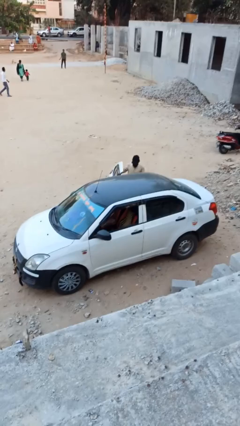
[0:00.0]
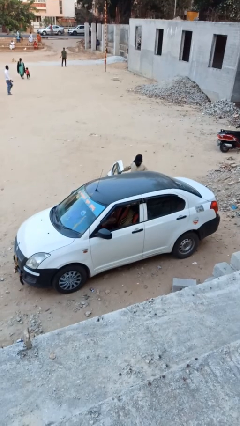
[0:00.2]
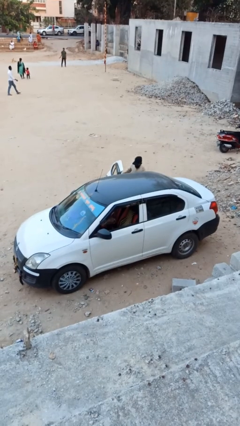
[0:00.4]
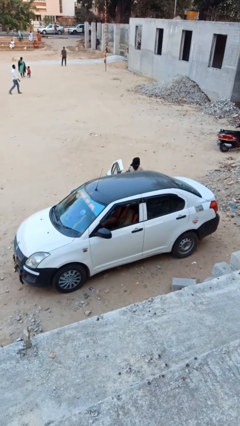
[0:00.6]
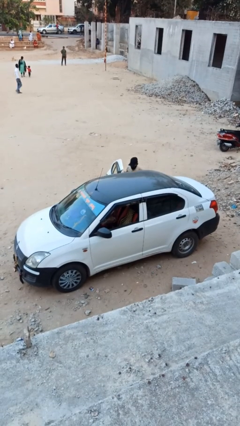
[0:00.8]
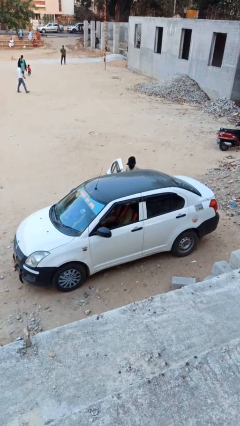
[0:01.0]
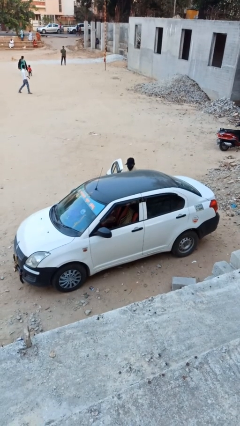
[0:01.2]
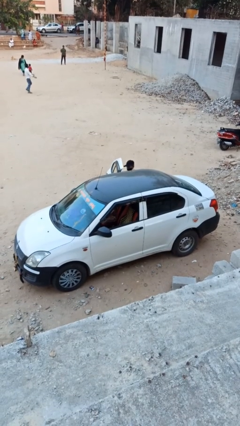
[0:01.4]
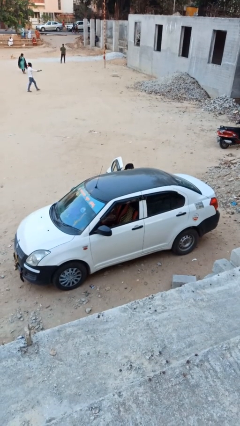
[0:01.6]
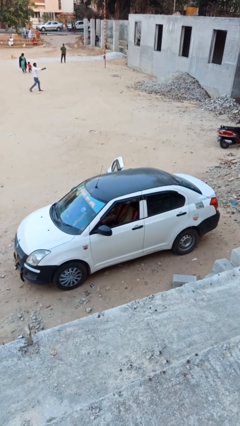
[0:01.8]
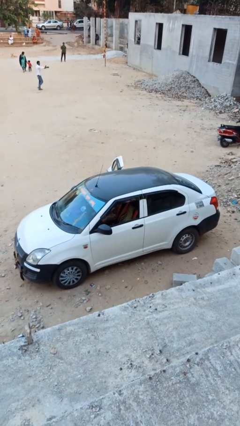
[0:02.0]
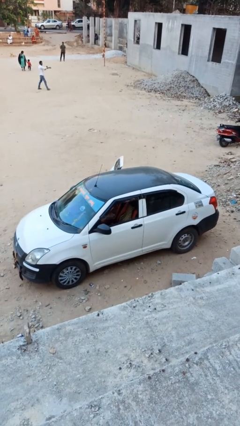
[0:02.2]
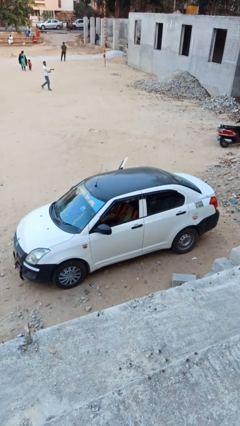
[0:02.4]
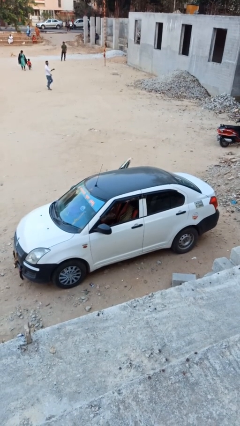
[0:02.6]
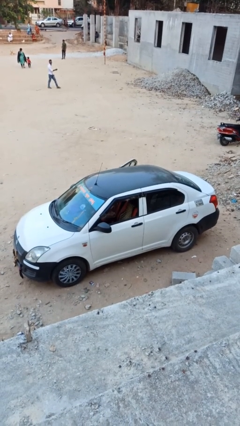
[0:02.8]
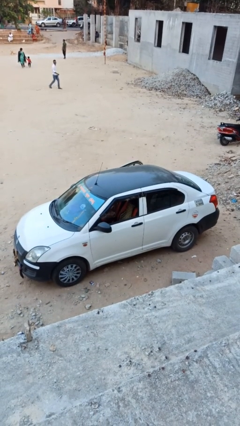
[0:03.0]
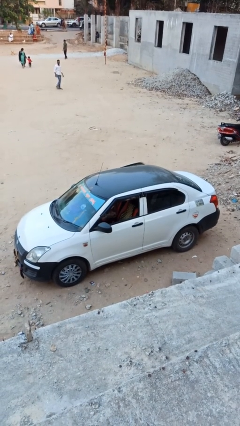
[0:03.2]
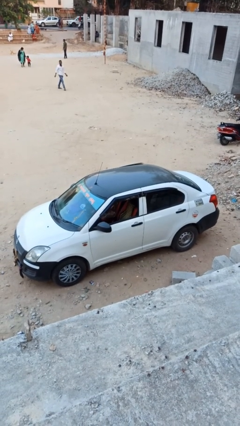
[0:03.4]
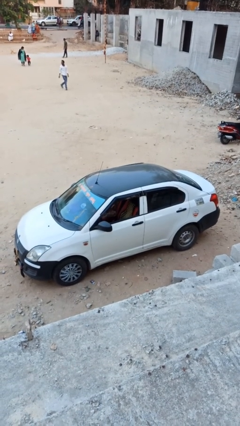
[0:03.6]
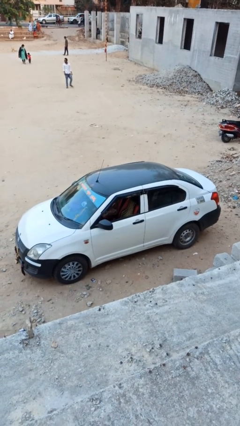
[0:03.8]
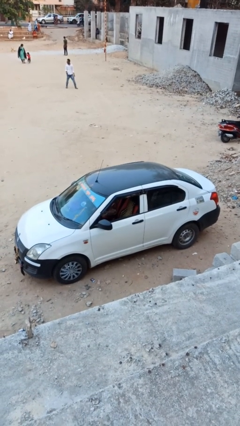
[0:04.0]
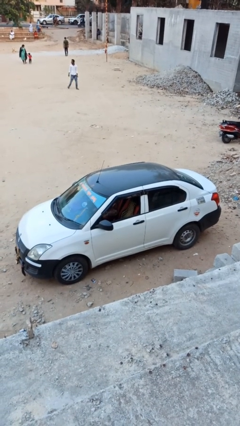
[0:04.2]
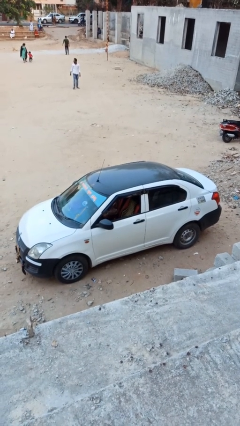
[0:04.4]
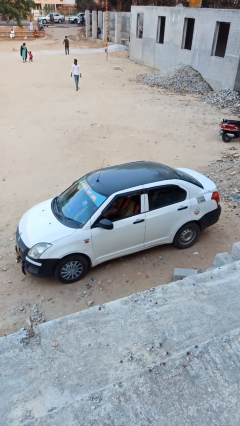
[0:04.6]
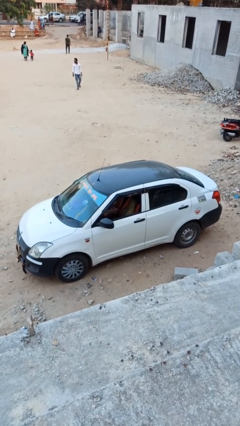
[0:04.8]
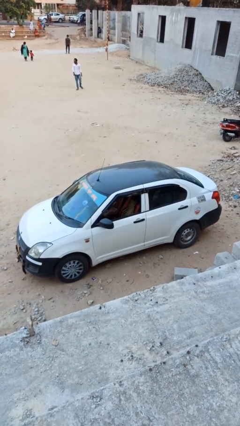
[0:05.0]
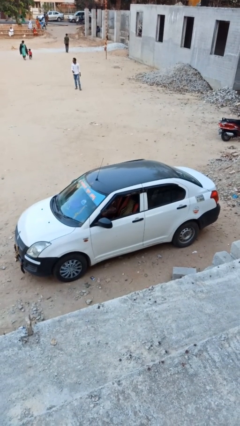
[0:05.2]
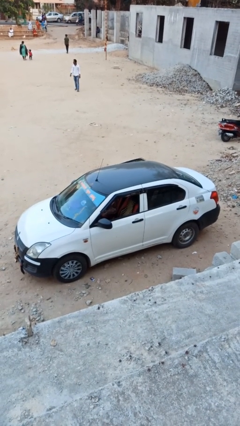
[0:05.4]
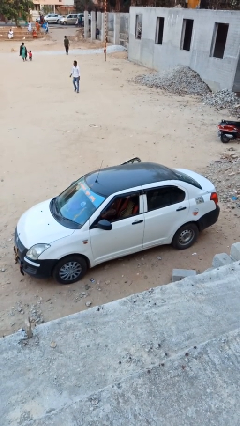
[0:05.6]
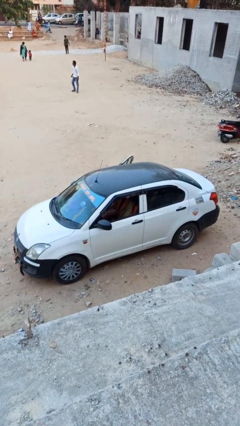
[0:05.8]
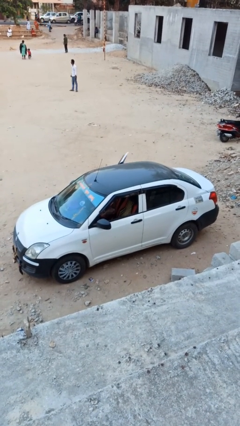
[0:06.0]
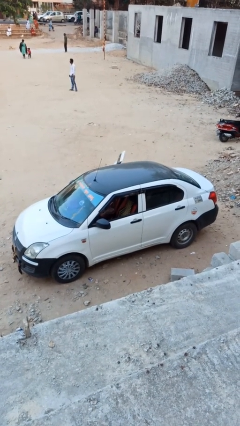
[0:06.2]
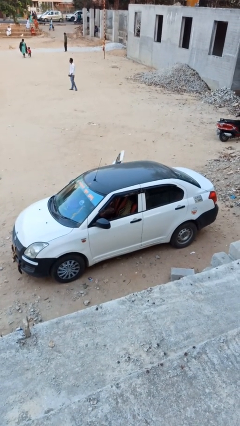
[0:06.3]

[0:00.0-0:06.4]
car picks up person

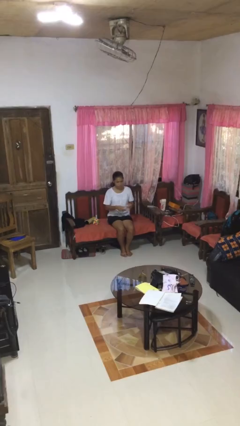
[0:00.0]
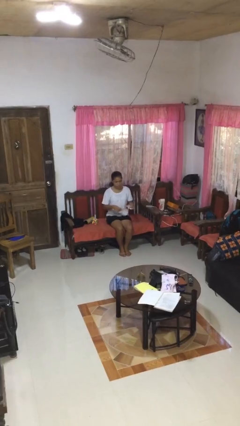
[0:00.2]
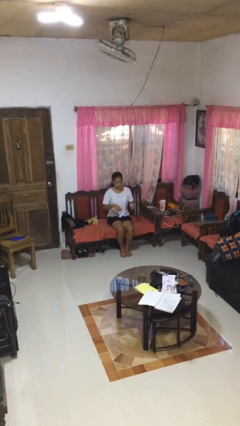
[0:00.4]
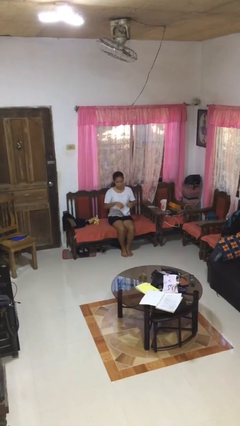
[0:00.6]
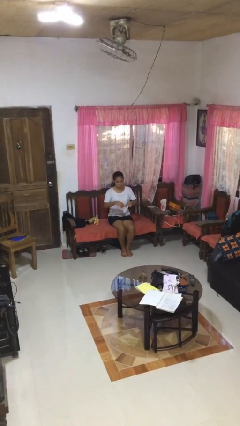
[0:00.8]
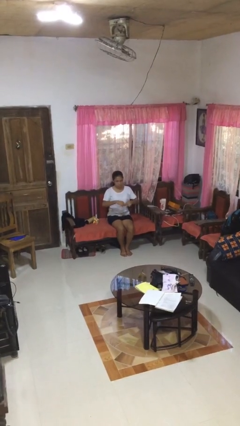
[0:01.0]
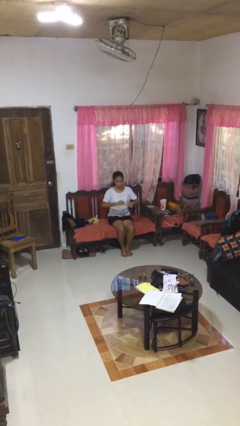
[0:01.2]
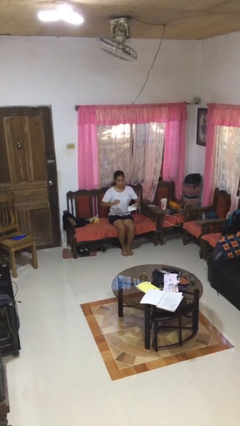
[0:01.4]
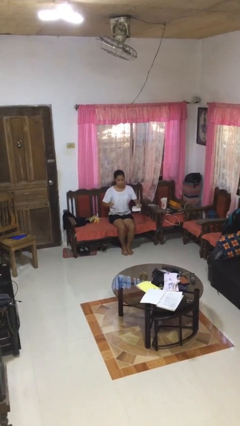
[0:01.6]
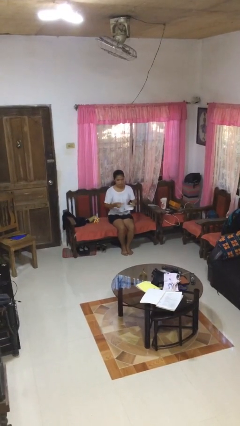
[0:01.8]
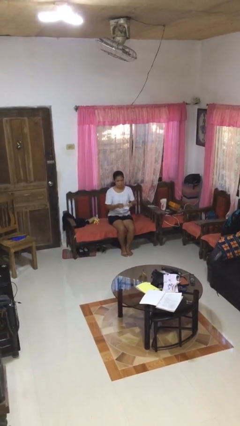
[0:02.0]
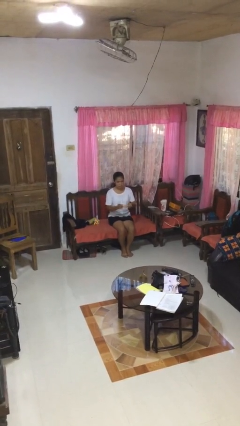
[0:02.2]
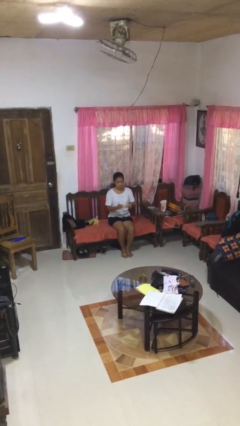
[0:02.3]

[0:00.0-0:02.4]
person tears paper

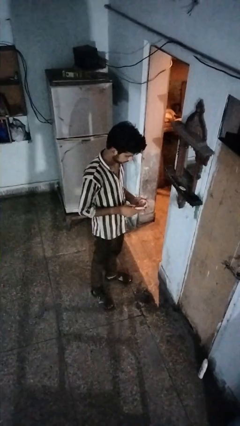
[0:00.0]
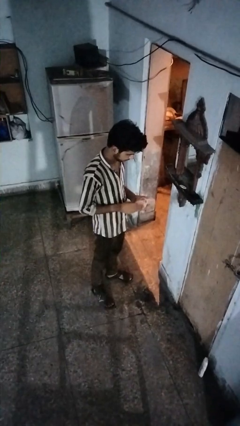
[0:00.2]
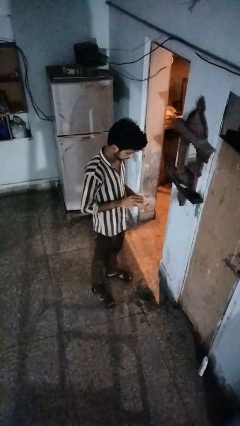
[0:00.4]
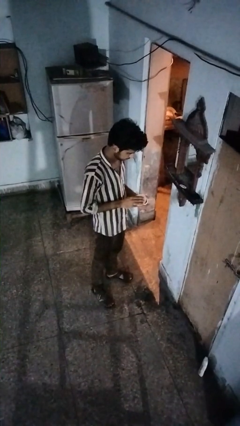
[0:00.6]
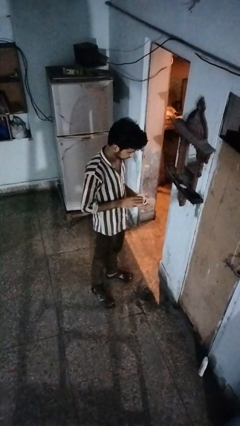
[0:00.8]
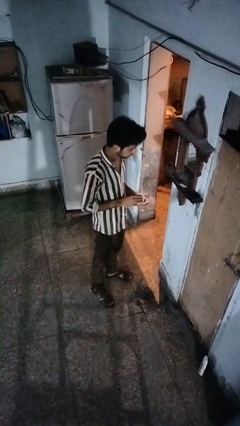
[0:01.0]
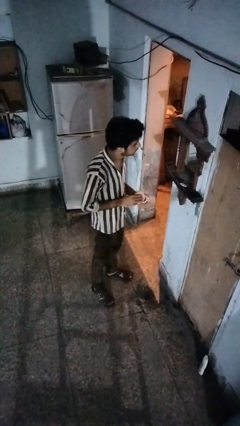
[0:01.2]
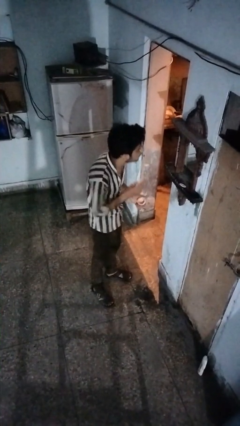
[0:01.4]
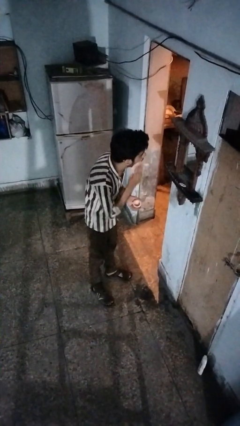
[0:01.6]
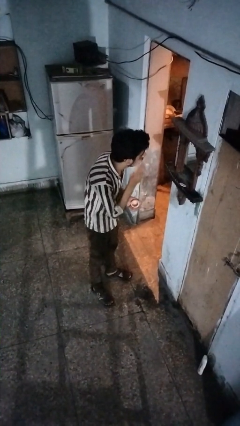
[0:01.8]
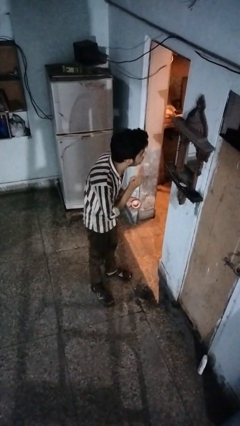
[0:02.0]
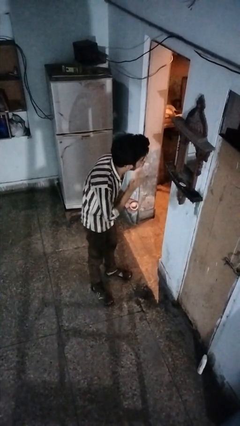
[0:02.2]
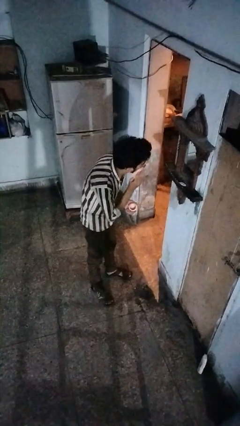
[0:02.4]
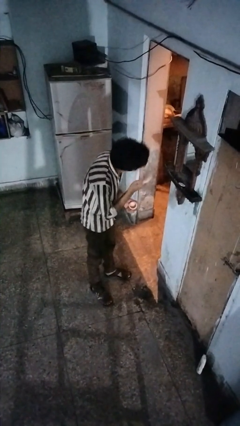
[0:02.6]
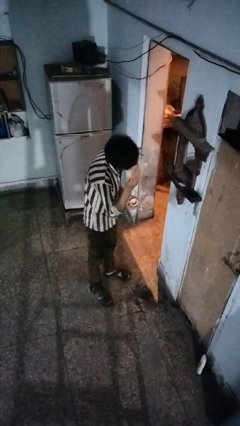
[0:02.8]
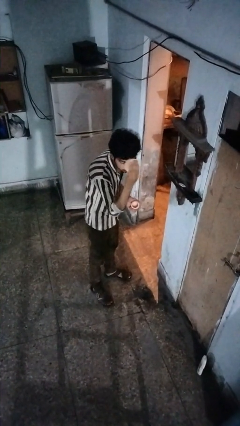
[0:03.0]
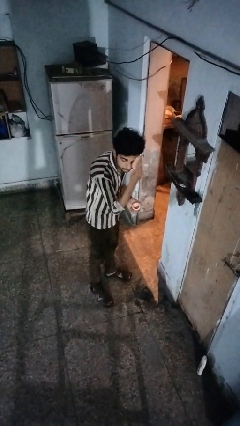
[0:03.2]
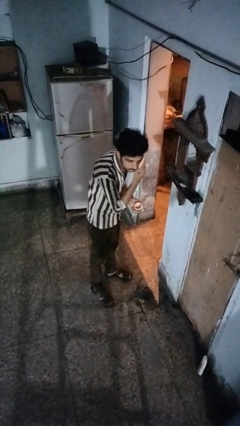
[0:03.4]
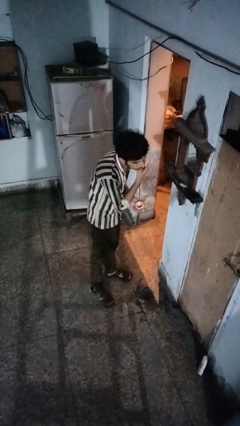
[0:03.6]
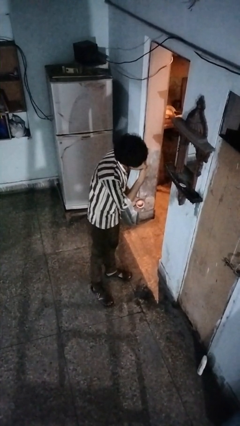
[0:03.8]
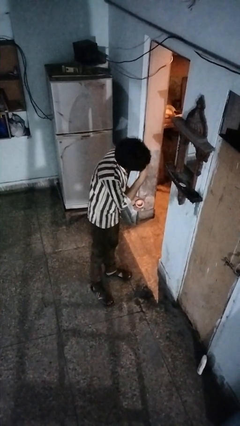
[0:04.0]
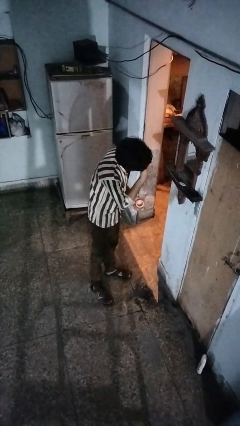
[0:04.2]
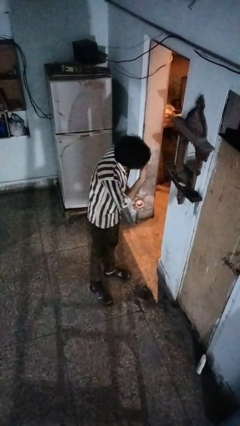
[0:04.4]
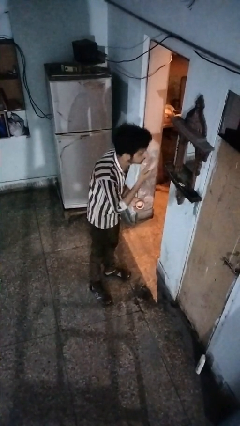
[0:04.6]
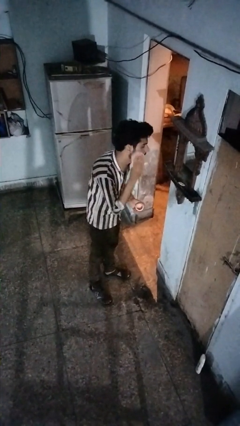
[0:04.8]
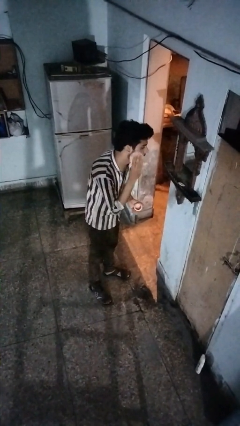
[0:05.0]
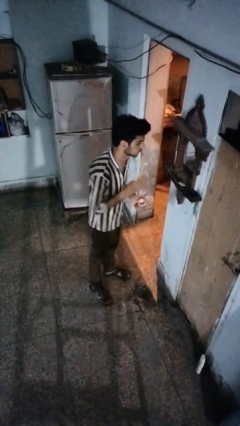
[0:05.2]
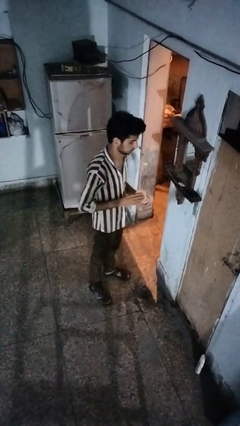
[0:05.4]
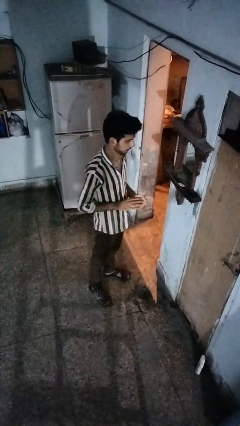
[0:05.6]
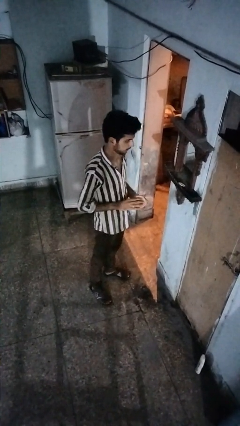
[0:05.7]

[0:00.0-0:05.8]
person applies foundation makeup

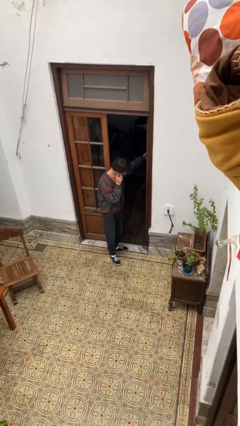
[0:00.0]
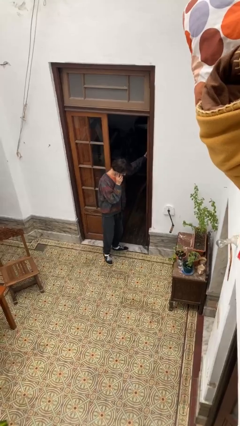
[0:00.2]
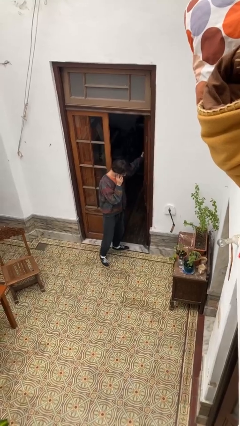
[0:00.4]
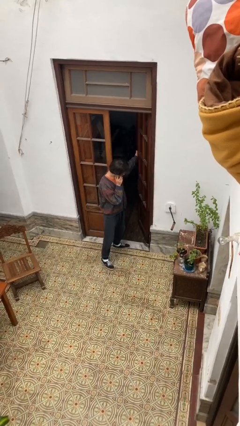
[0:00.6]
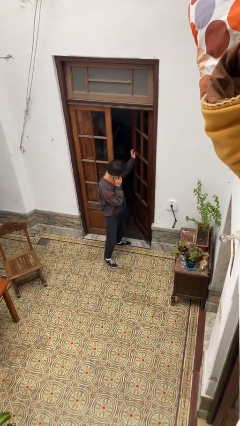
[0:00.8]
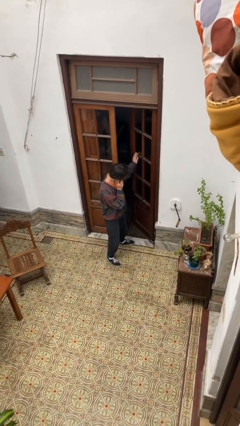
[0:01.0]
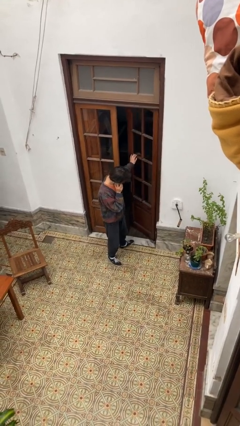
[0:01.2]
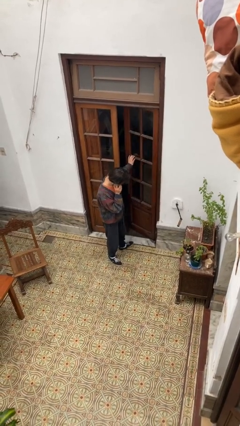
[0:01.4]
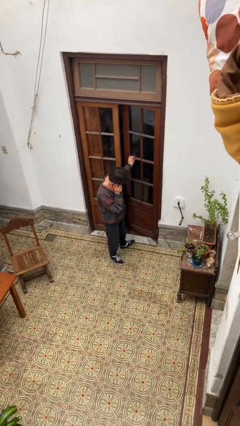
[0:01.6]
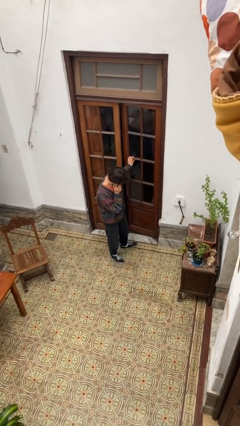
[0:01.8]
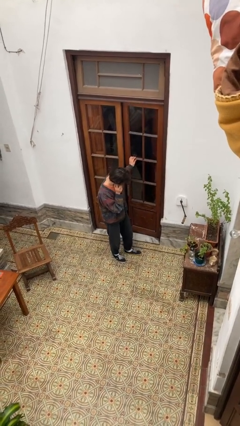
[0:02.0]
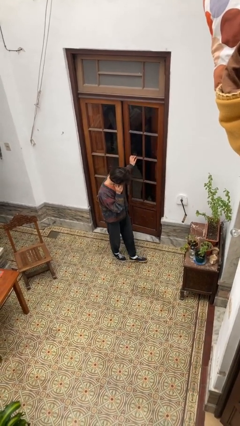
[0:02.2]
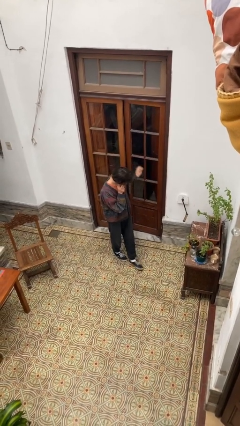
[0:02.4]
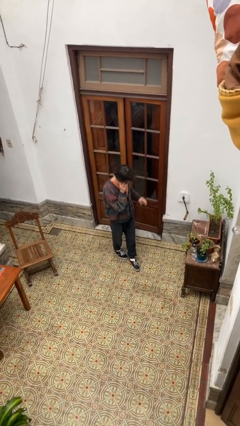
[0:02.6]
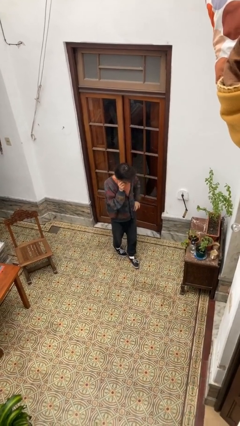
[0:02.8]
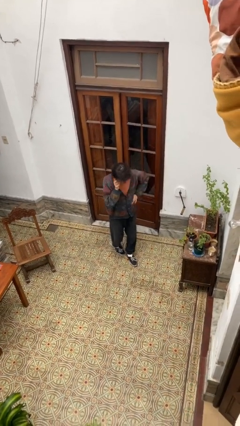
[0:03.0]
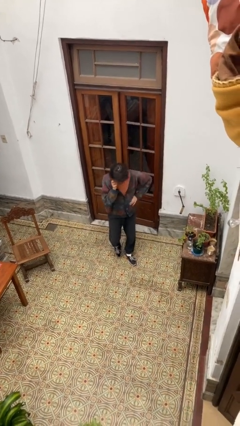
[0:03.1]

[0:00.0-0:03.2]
person closes facility door
